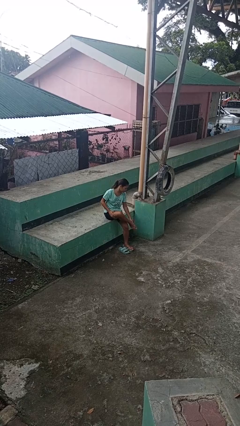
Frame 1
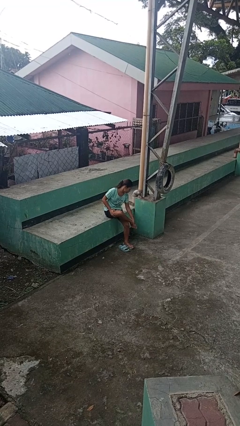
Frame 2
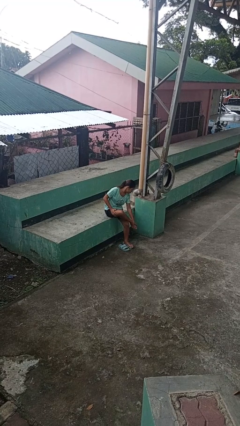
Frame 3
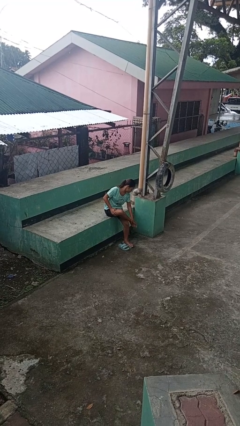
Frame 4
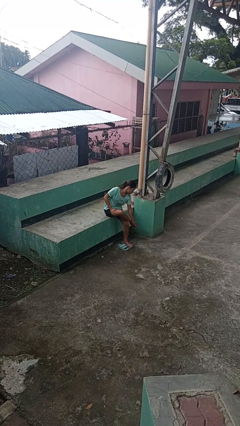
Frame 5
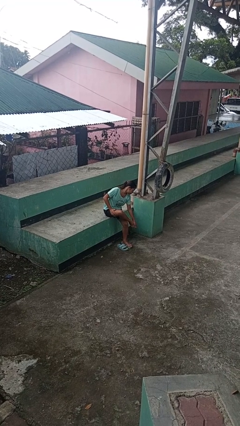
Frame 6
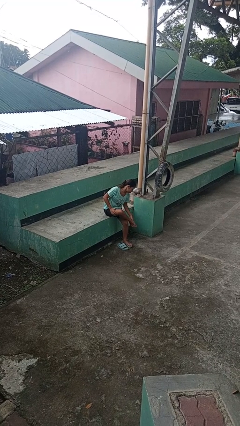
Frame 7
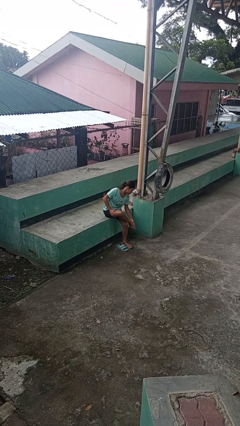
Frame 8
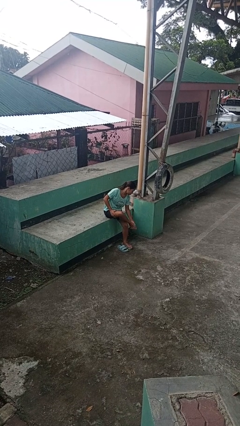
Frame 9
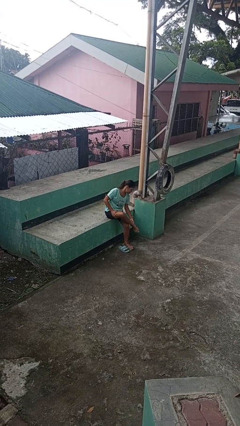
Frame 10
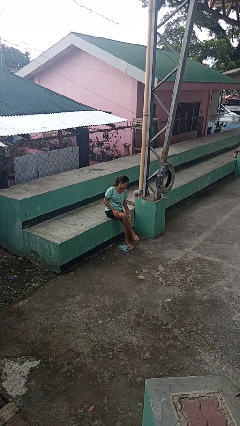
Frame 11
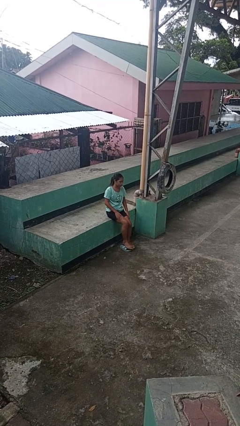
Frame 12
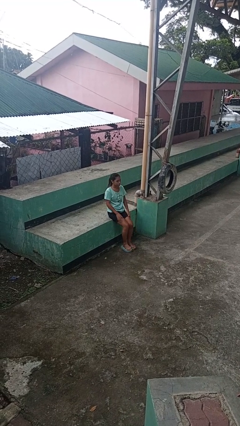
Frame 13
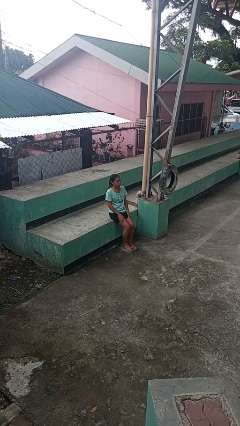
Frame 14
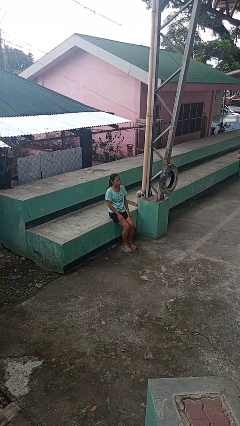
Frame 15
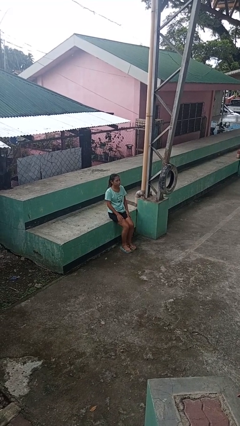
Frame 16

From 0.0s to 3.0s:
person rubs foot

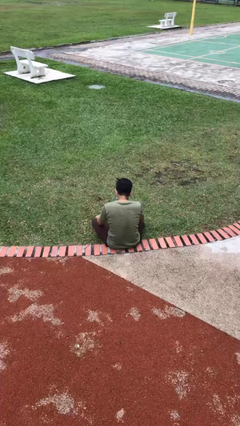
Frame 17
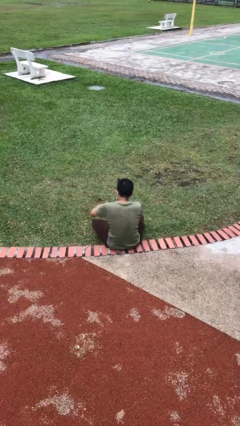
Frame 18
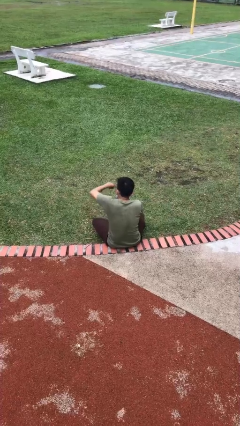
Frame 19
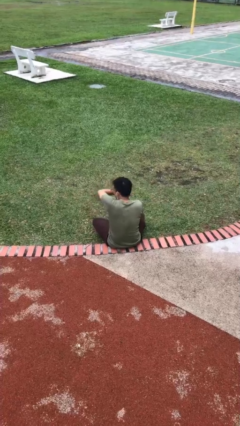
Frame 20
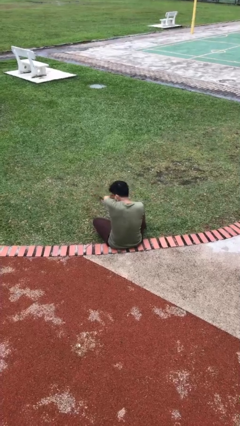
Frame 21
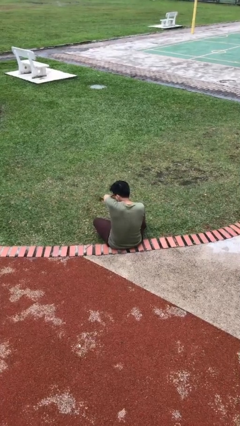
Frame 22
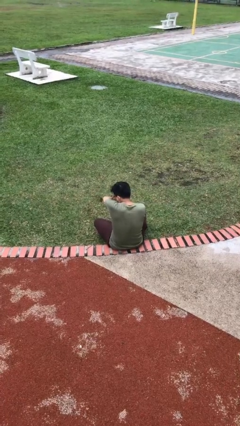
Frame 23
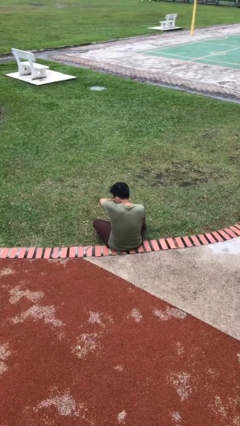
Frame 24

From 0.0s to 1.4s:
person sneezes into arm

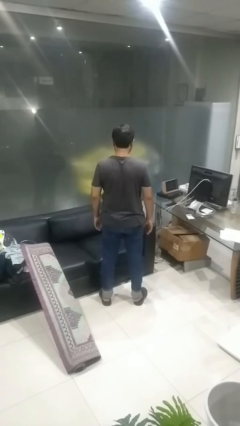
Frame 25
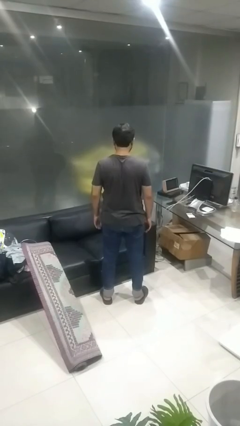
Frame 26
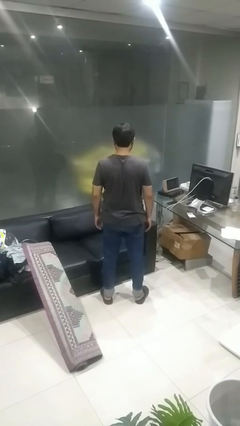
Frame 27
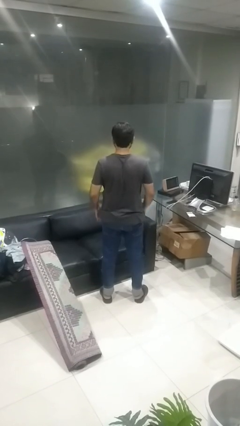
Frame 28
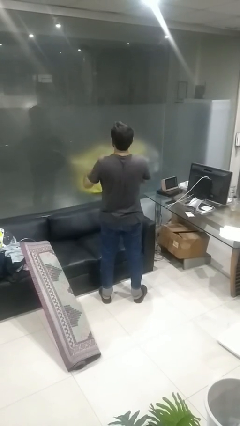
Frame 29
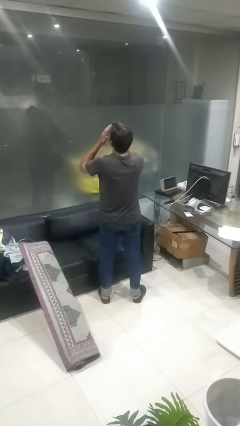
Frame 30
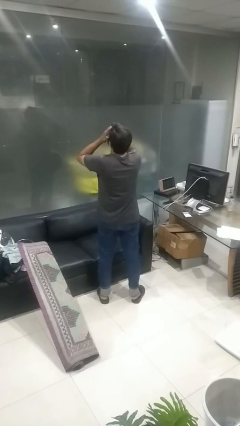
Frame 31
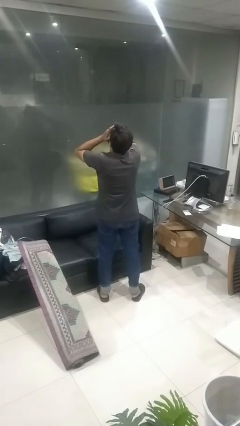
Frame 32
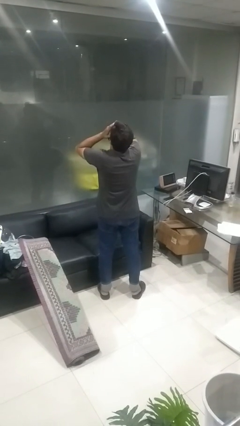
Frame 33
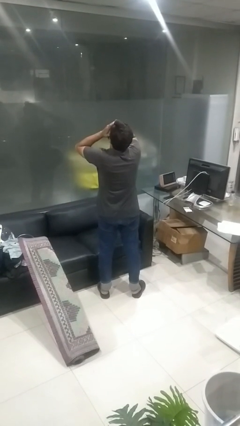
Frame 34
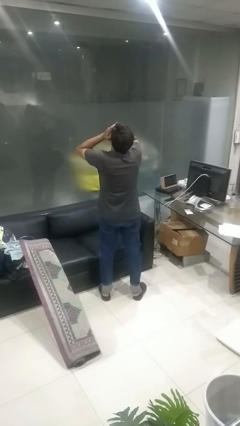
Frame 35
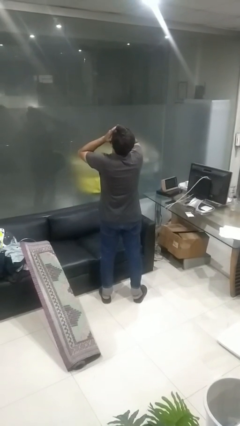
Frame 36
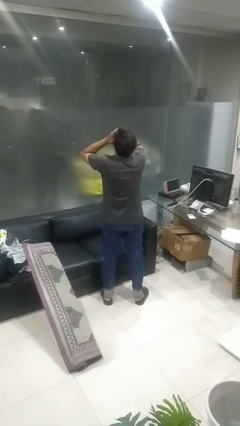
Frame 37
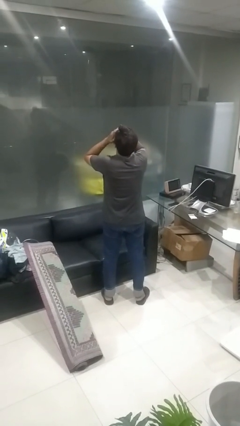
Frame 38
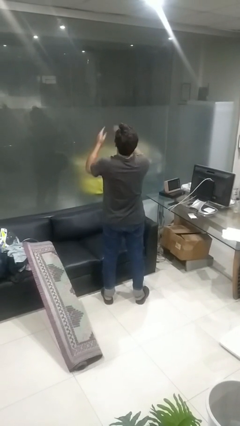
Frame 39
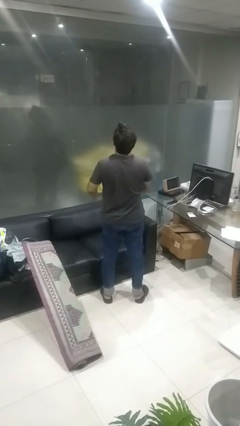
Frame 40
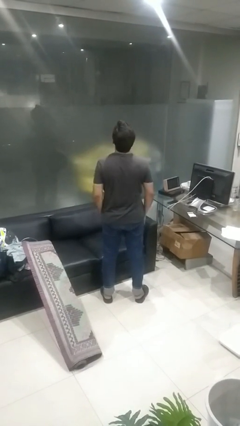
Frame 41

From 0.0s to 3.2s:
person covers face with hands

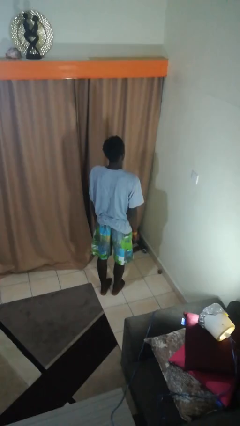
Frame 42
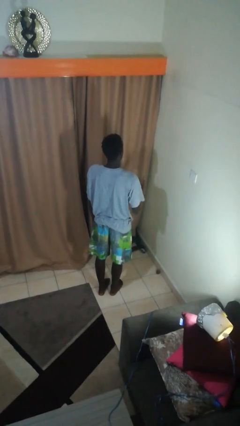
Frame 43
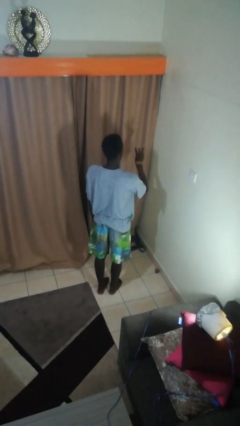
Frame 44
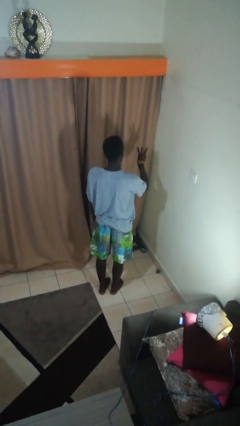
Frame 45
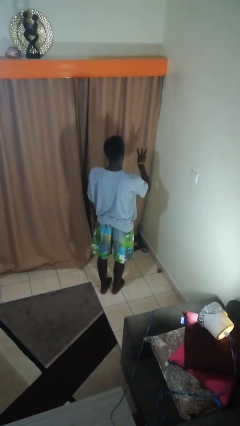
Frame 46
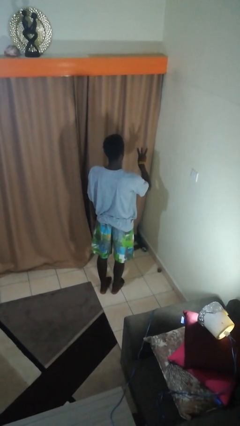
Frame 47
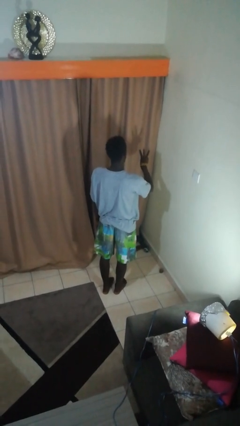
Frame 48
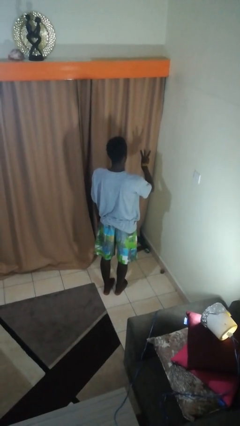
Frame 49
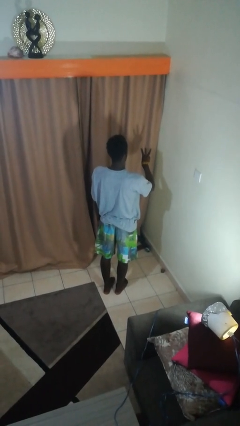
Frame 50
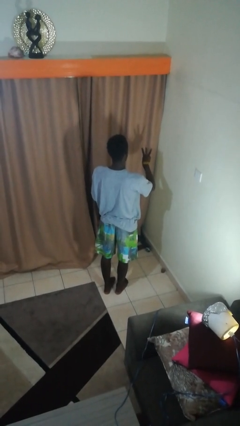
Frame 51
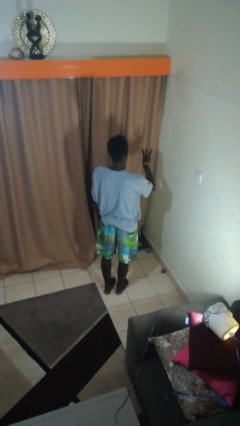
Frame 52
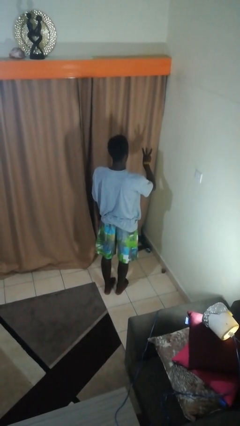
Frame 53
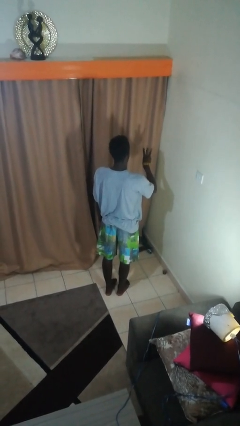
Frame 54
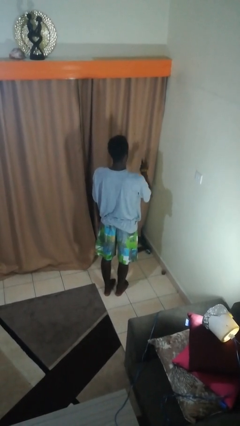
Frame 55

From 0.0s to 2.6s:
person gestures number three

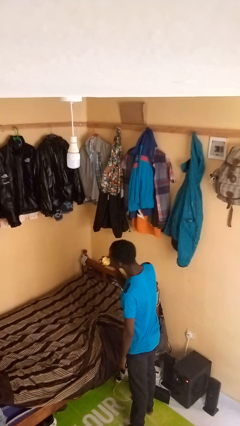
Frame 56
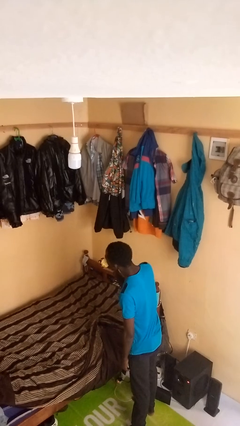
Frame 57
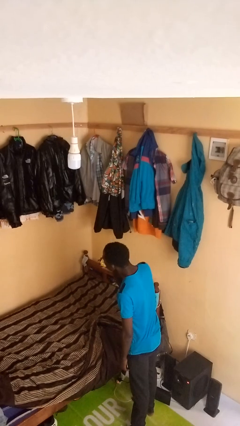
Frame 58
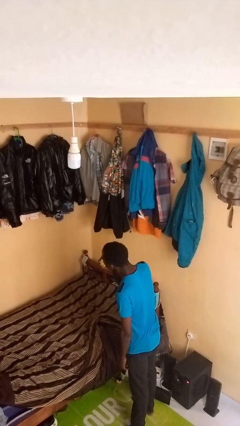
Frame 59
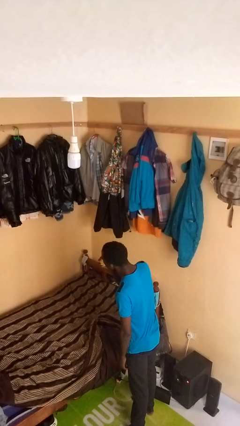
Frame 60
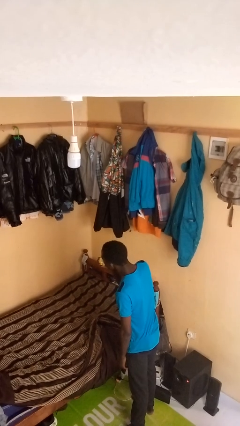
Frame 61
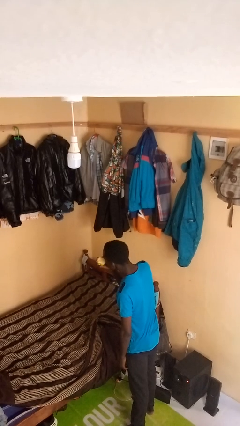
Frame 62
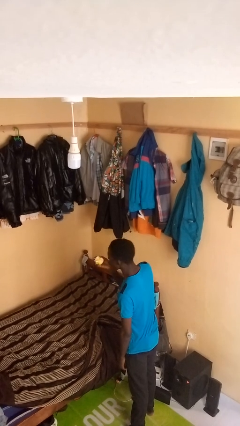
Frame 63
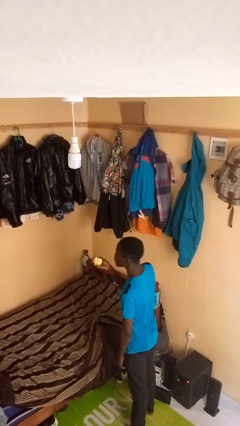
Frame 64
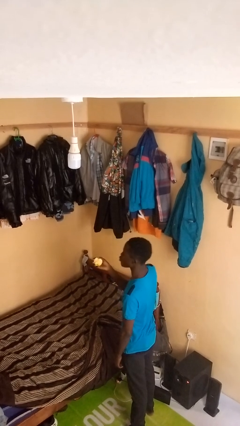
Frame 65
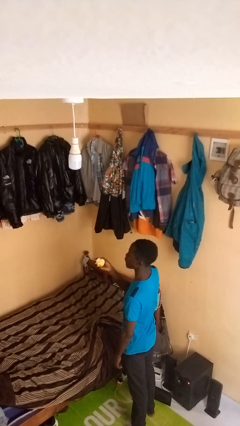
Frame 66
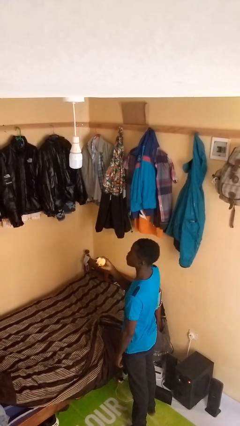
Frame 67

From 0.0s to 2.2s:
person eats apple

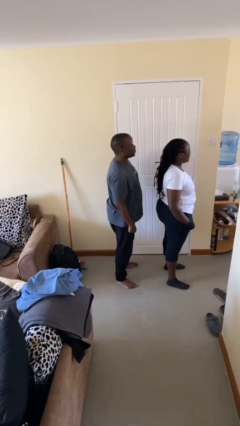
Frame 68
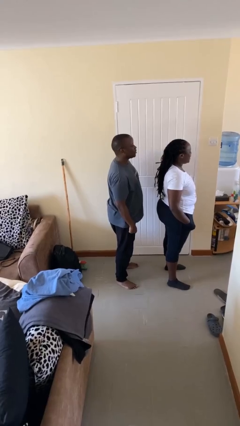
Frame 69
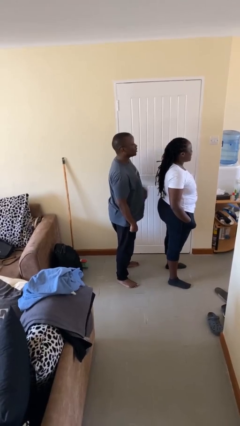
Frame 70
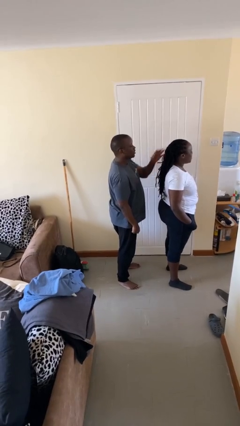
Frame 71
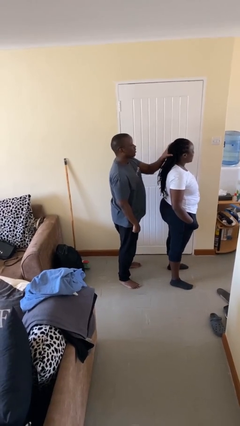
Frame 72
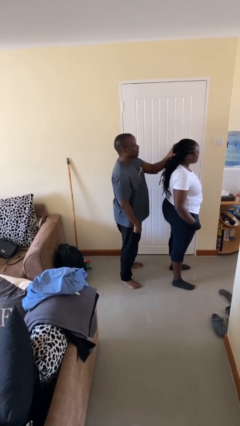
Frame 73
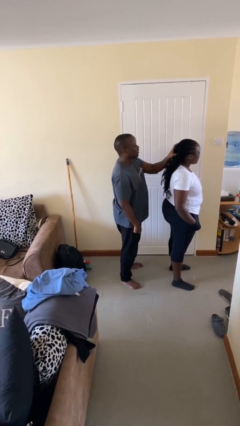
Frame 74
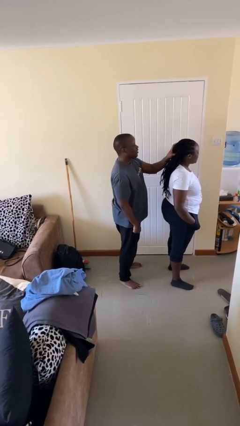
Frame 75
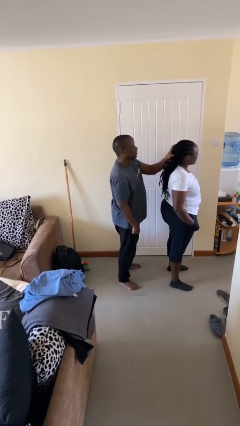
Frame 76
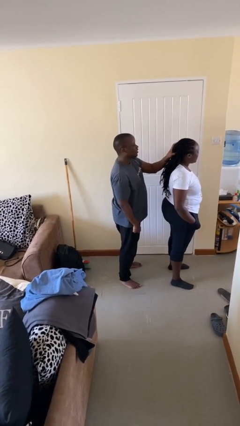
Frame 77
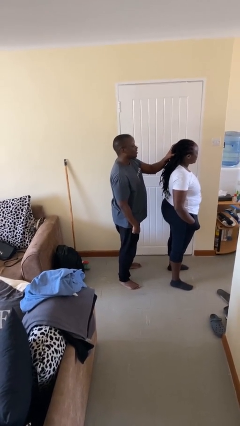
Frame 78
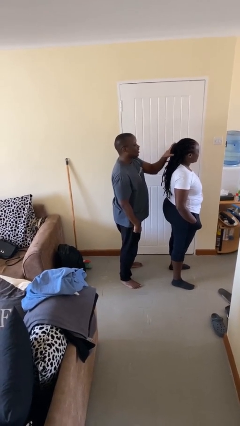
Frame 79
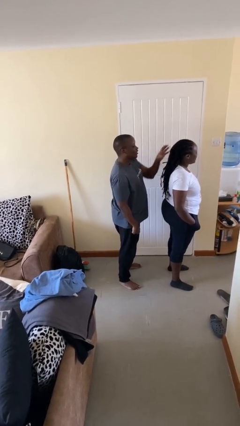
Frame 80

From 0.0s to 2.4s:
person grabs person by hair

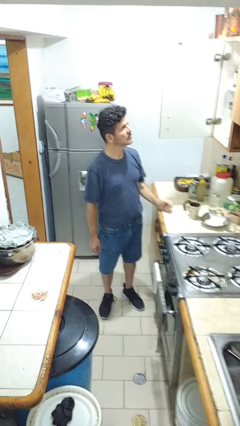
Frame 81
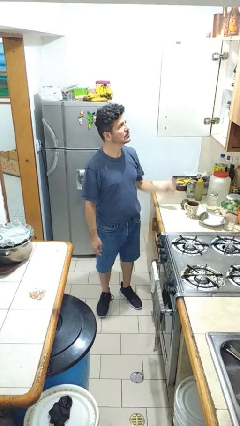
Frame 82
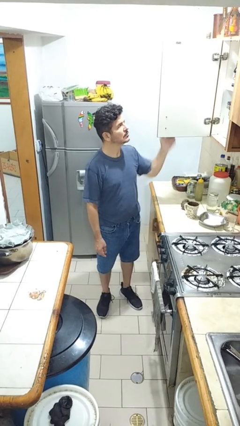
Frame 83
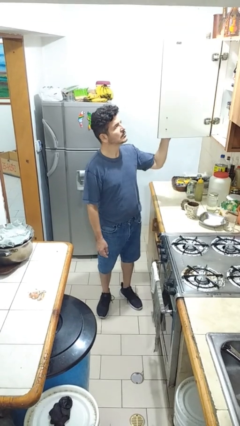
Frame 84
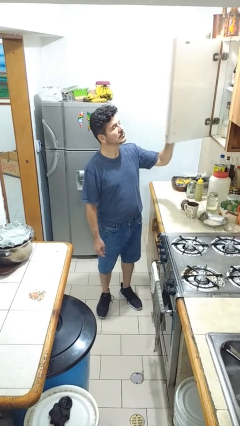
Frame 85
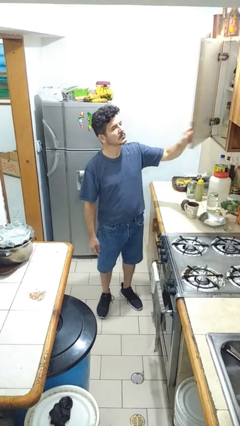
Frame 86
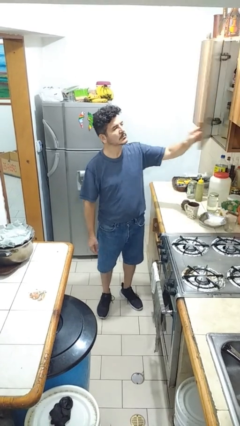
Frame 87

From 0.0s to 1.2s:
person closes cabinet

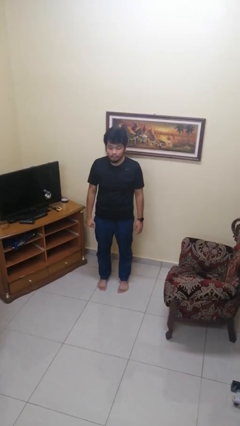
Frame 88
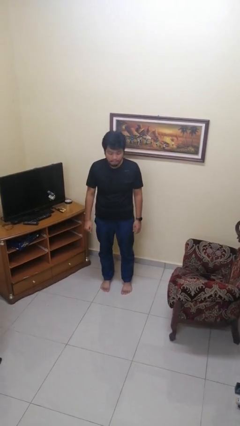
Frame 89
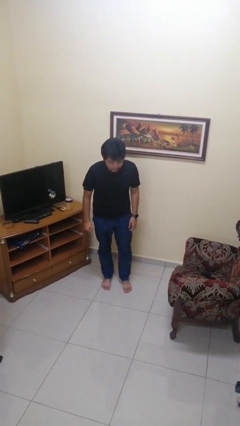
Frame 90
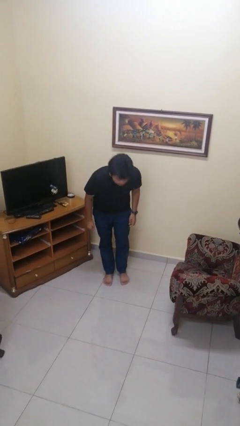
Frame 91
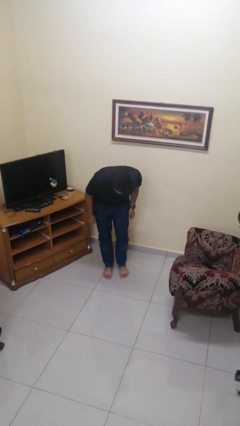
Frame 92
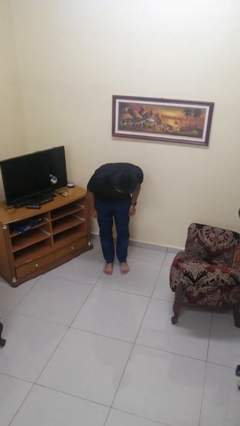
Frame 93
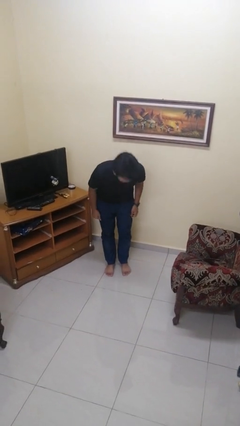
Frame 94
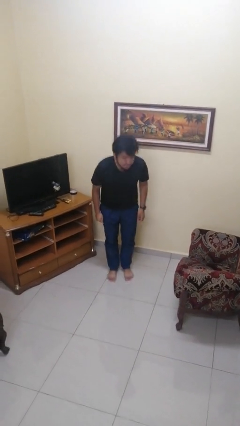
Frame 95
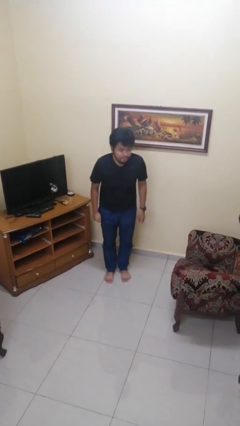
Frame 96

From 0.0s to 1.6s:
person bows
